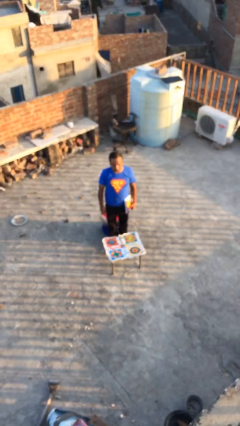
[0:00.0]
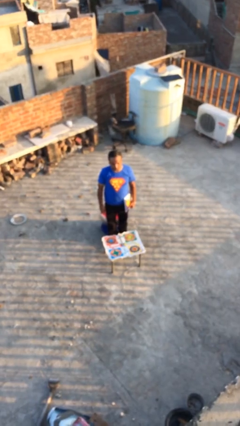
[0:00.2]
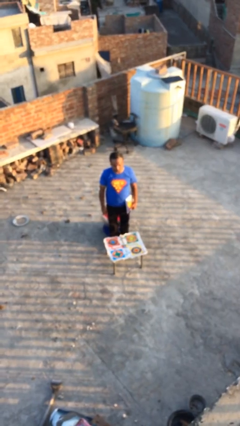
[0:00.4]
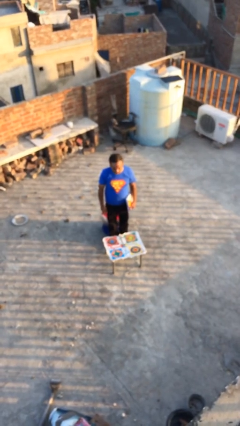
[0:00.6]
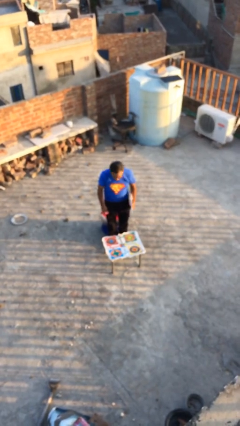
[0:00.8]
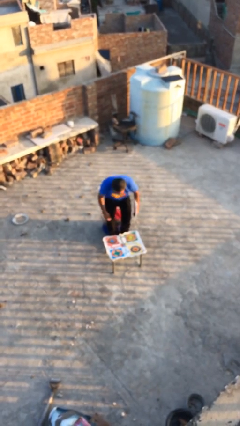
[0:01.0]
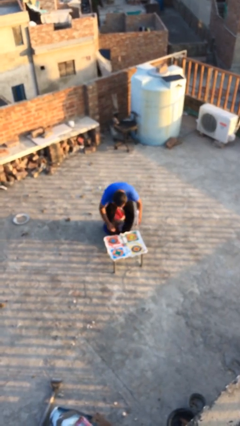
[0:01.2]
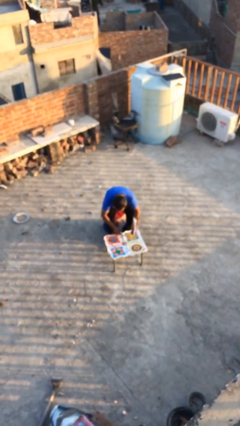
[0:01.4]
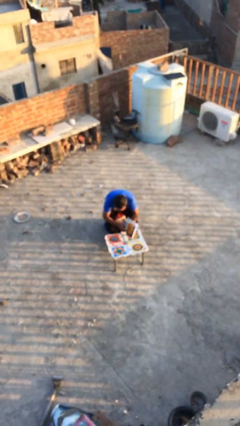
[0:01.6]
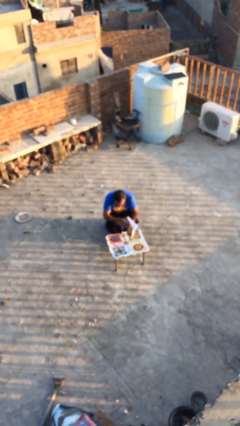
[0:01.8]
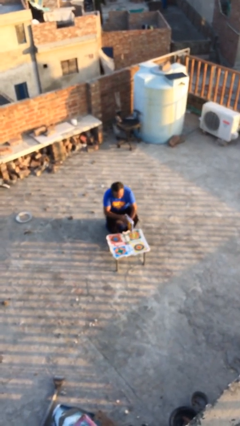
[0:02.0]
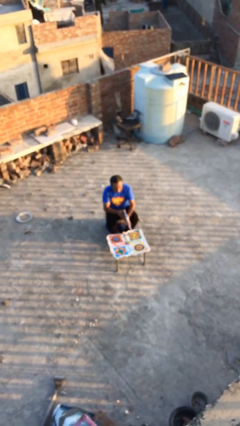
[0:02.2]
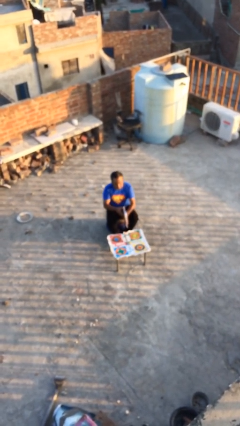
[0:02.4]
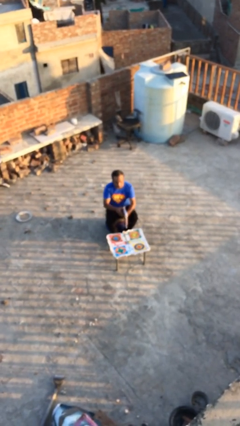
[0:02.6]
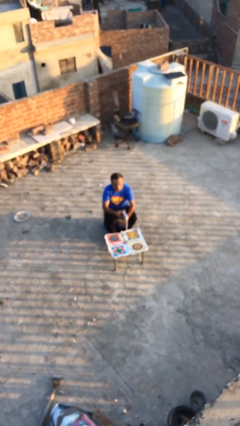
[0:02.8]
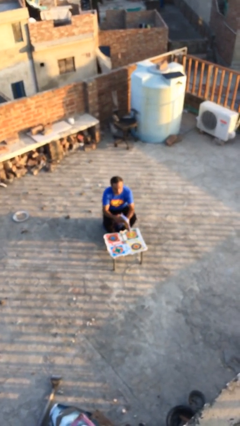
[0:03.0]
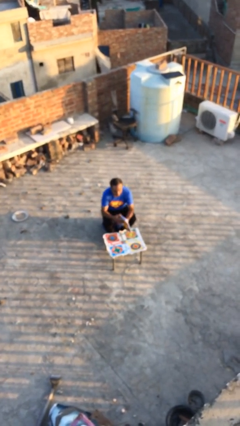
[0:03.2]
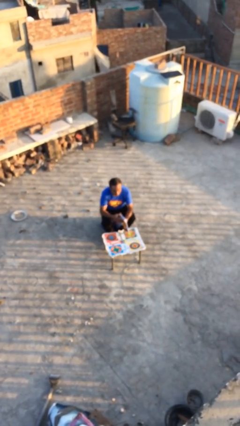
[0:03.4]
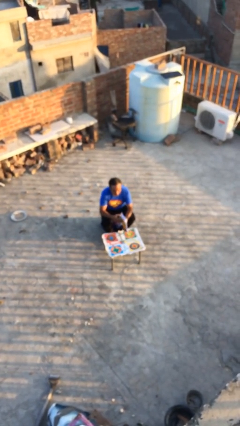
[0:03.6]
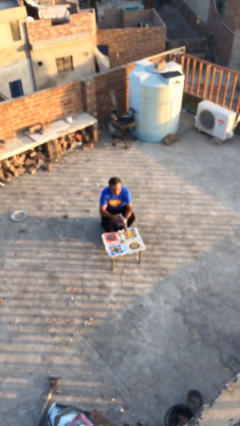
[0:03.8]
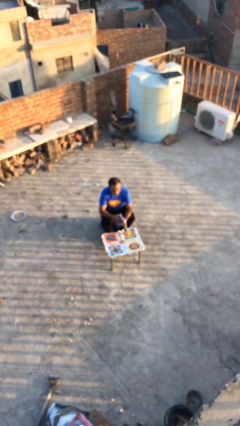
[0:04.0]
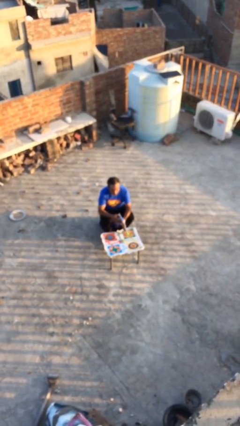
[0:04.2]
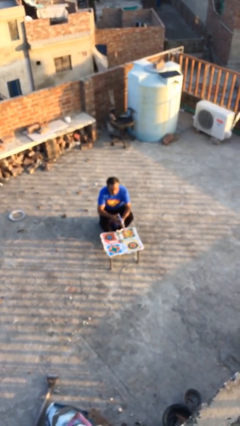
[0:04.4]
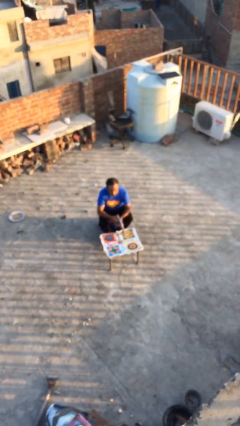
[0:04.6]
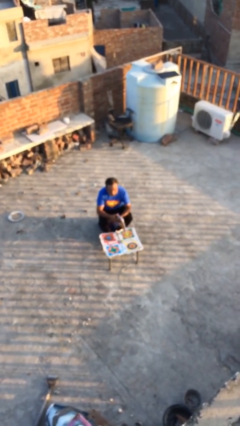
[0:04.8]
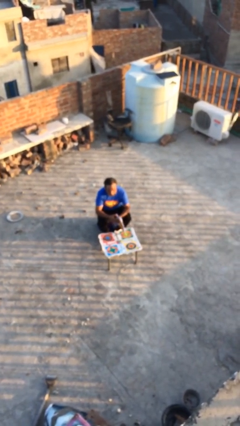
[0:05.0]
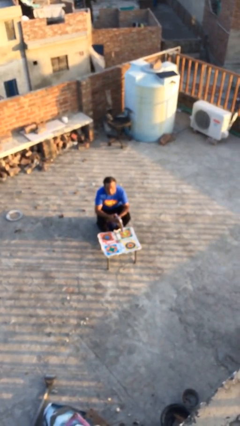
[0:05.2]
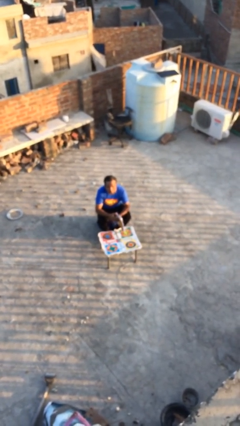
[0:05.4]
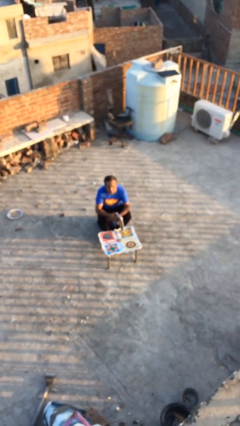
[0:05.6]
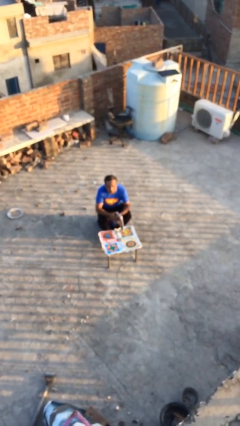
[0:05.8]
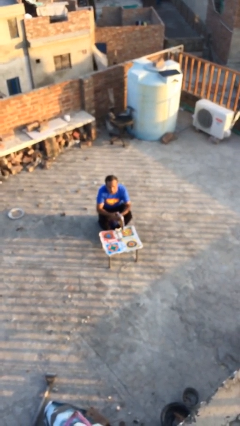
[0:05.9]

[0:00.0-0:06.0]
person sits down

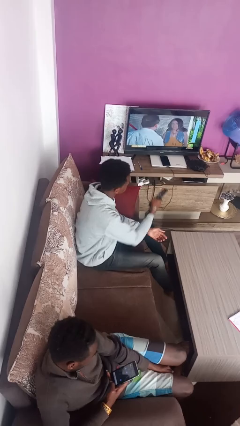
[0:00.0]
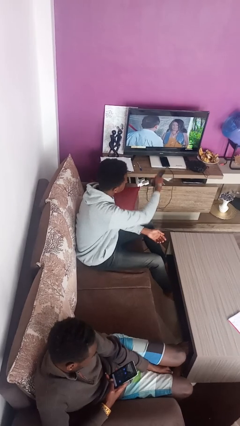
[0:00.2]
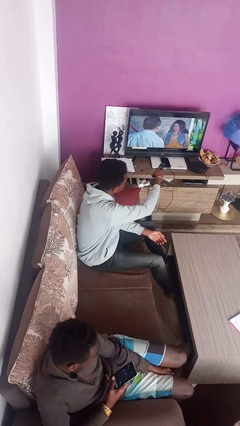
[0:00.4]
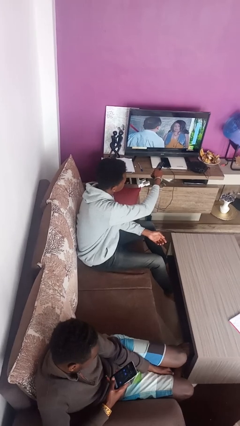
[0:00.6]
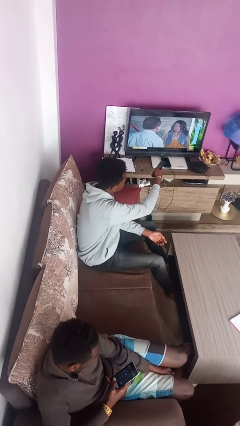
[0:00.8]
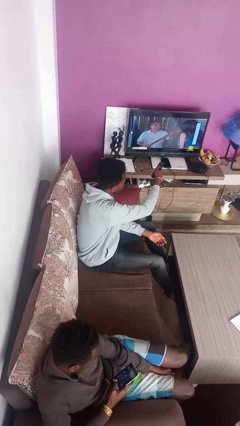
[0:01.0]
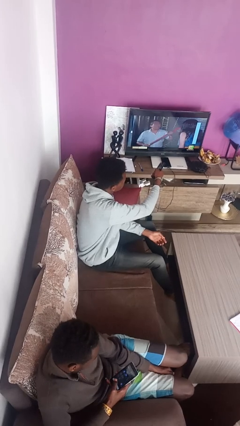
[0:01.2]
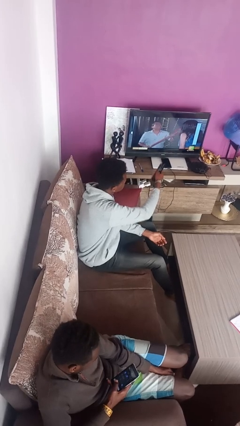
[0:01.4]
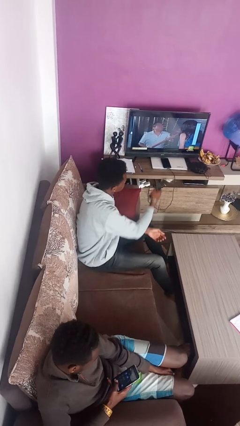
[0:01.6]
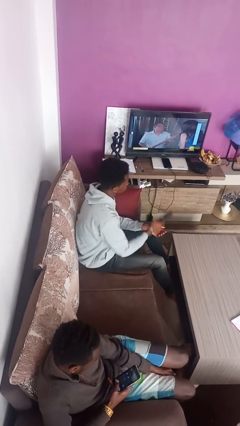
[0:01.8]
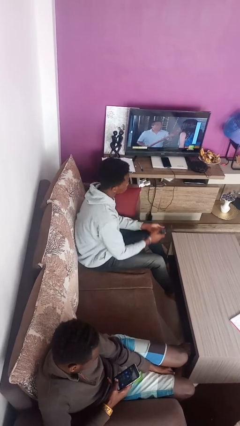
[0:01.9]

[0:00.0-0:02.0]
person uses television remote

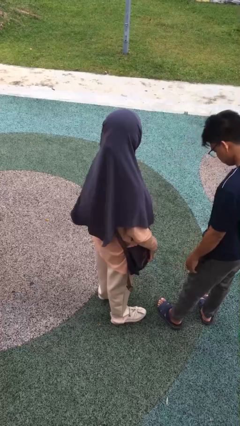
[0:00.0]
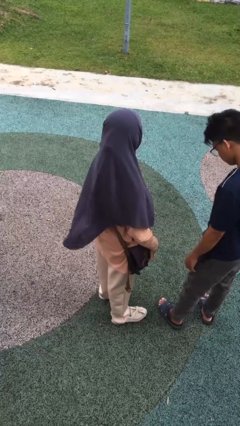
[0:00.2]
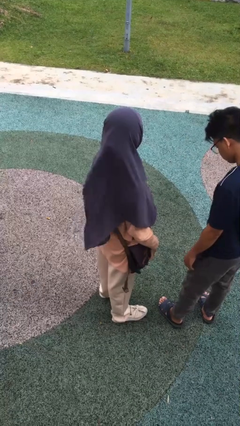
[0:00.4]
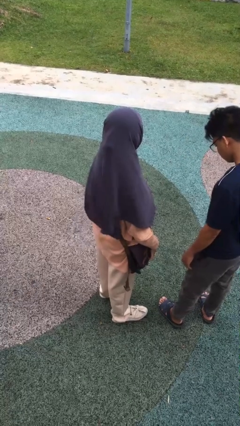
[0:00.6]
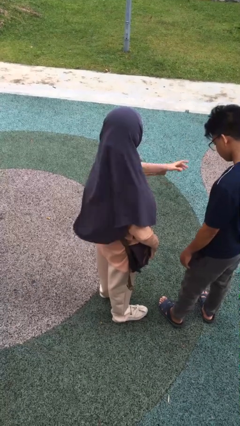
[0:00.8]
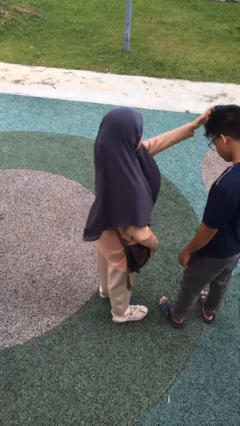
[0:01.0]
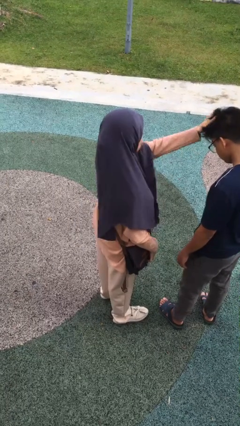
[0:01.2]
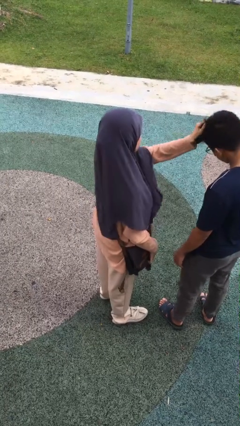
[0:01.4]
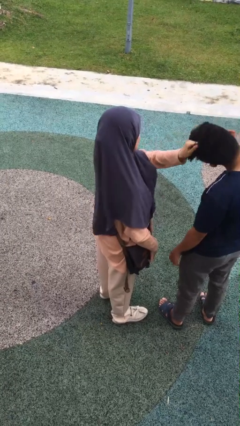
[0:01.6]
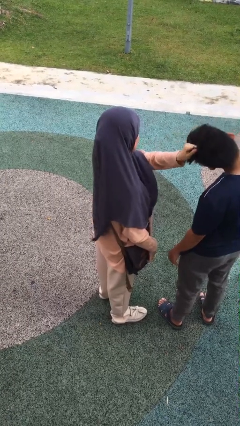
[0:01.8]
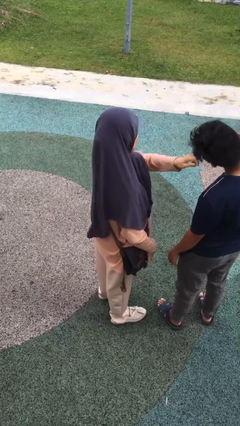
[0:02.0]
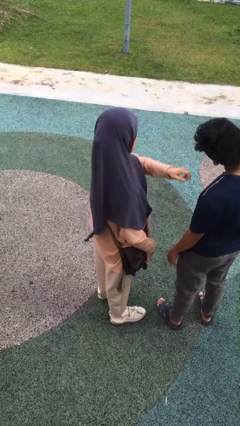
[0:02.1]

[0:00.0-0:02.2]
person grabs person by hair

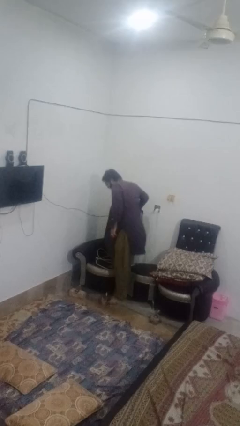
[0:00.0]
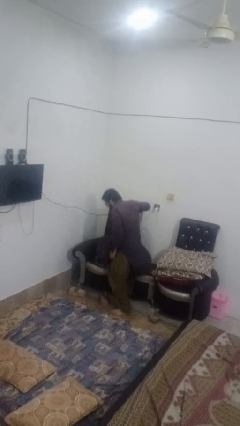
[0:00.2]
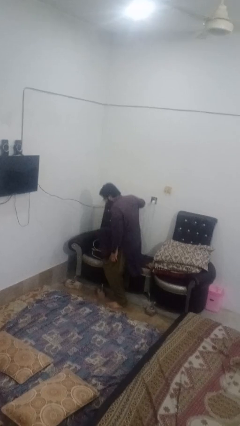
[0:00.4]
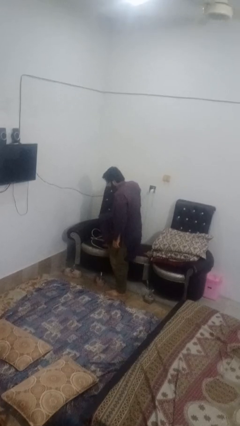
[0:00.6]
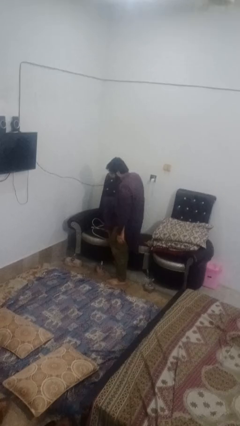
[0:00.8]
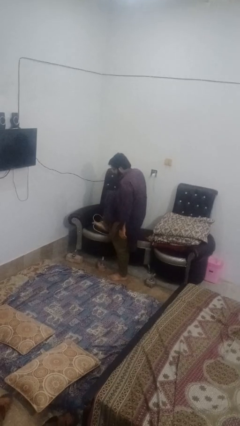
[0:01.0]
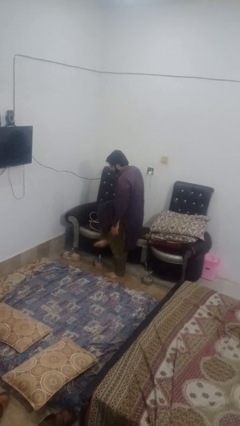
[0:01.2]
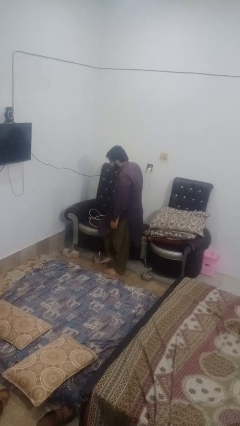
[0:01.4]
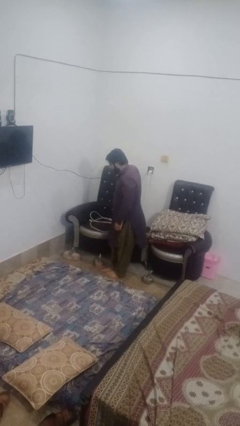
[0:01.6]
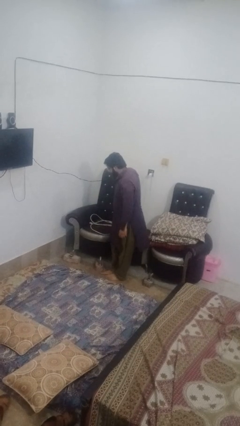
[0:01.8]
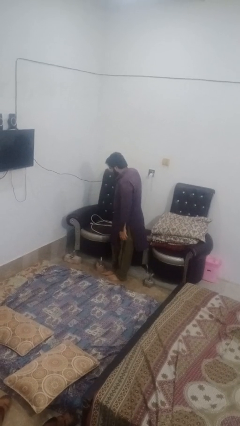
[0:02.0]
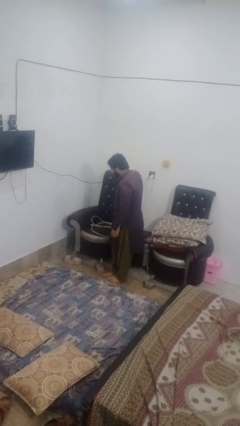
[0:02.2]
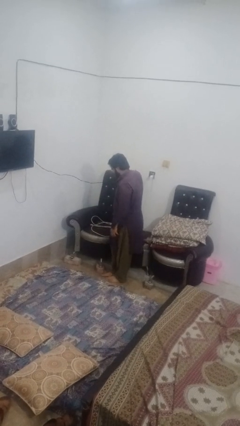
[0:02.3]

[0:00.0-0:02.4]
person climbs off couch

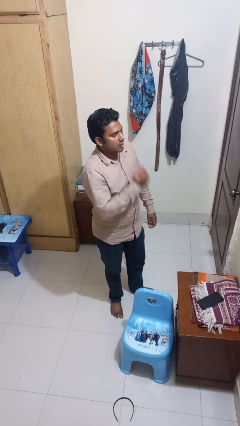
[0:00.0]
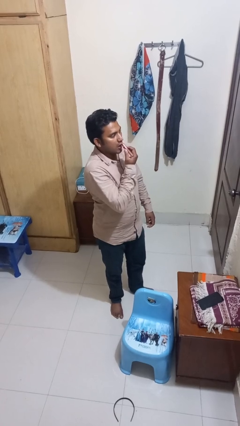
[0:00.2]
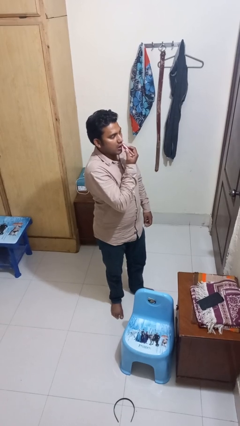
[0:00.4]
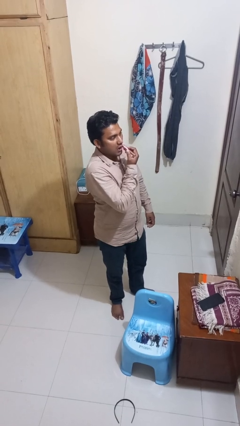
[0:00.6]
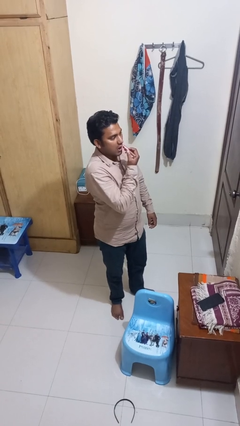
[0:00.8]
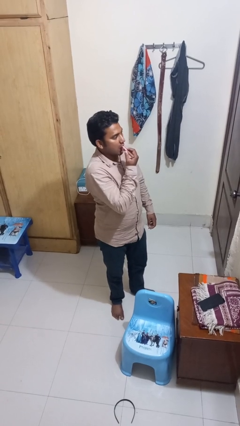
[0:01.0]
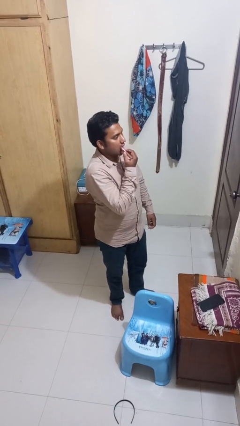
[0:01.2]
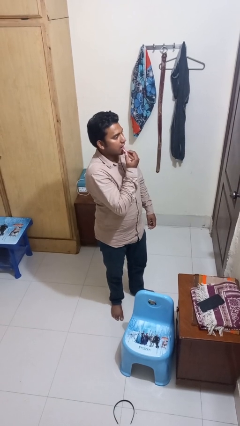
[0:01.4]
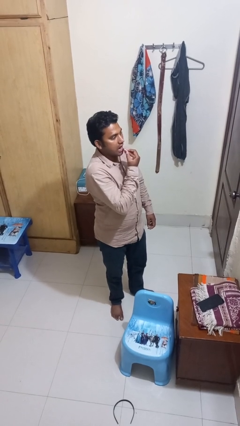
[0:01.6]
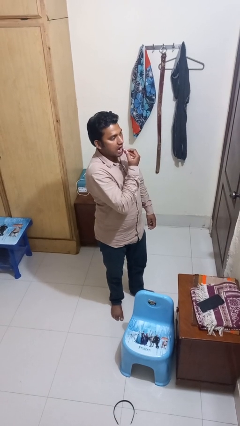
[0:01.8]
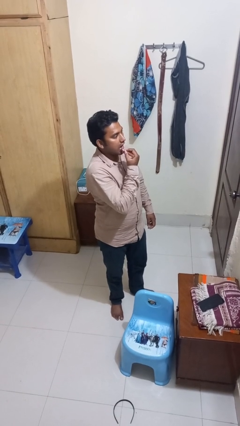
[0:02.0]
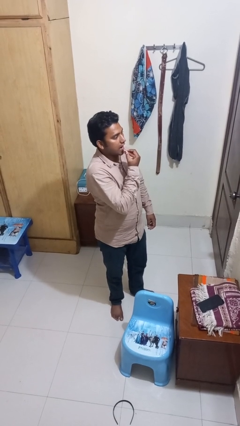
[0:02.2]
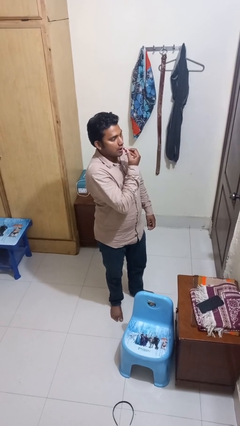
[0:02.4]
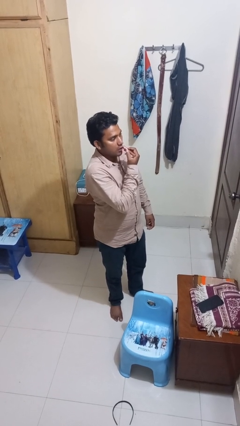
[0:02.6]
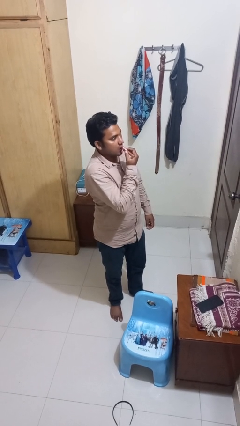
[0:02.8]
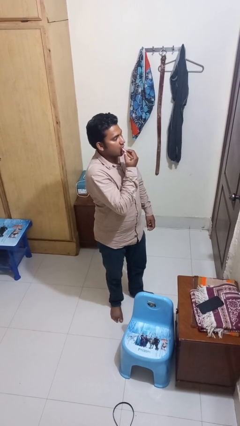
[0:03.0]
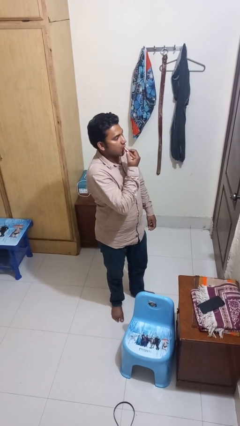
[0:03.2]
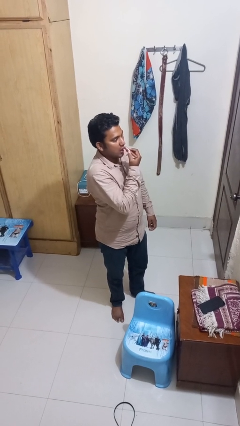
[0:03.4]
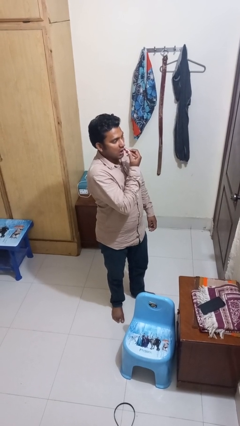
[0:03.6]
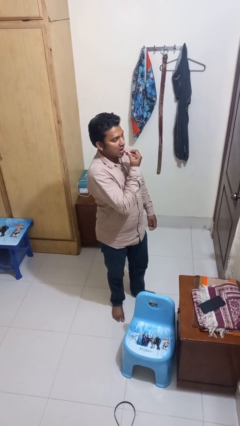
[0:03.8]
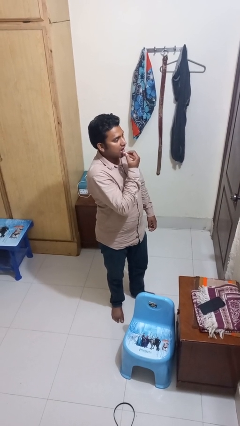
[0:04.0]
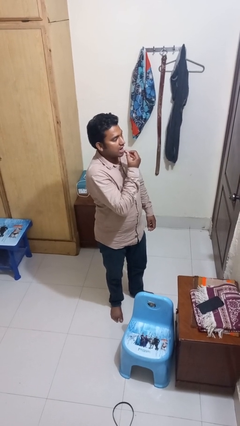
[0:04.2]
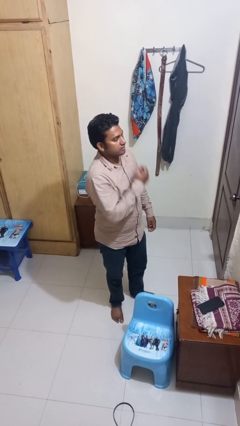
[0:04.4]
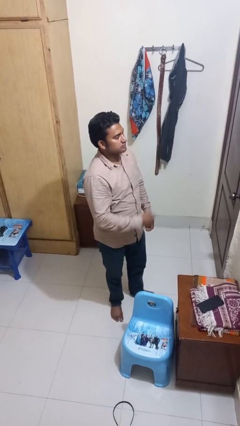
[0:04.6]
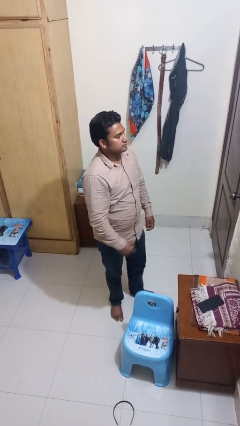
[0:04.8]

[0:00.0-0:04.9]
person applies lip makeup

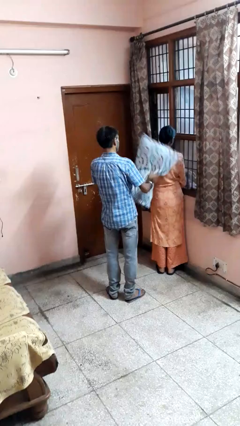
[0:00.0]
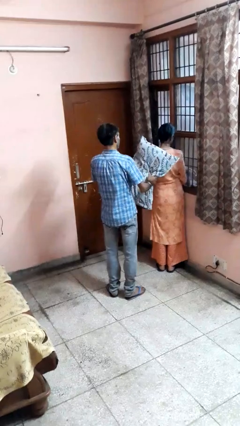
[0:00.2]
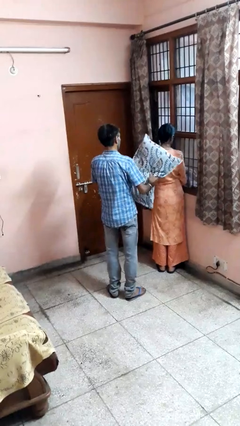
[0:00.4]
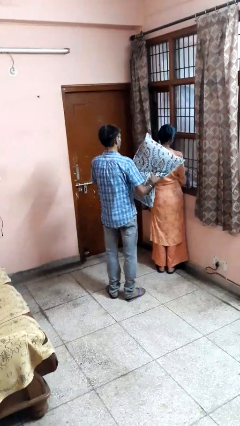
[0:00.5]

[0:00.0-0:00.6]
person hits person with pillow
